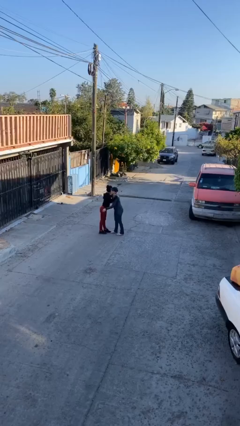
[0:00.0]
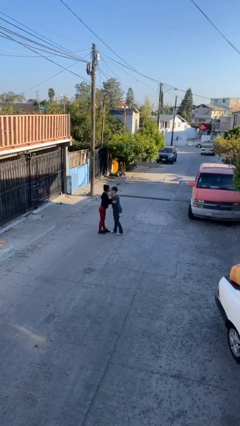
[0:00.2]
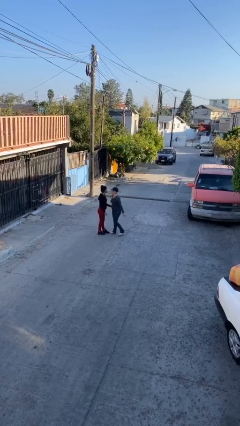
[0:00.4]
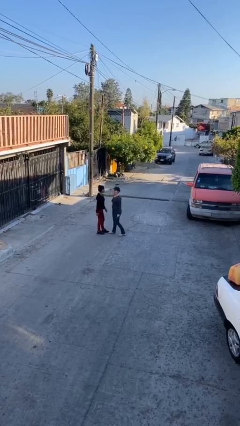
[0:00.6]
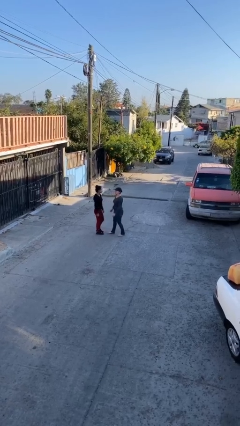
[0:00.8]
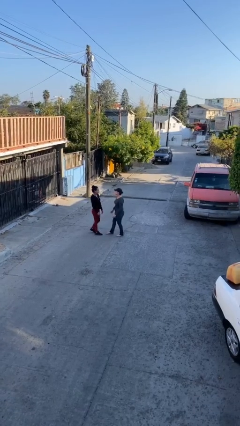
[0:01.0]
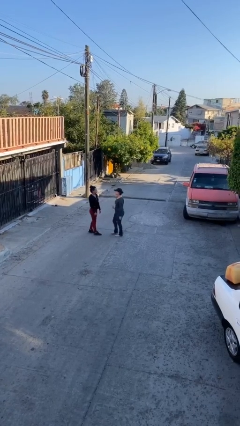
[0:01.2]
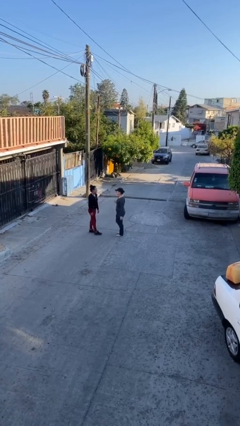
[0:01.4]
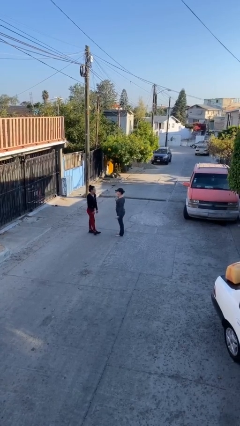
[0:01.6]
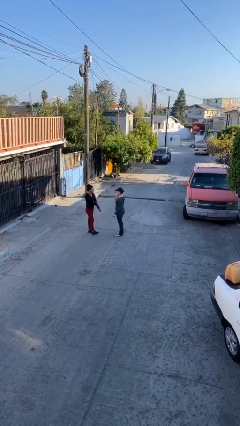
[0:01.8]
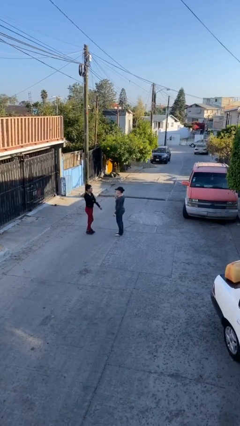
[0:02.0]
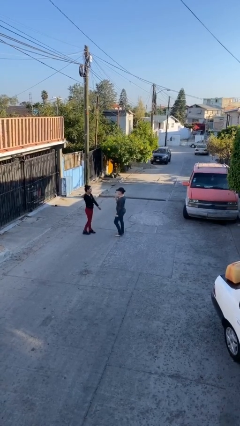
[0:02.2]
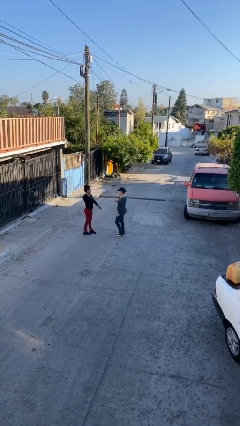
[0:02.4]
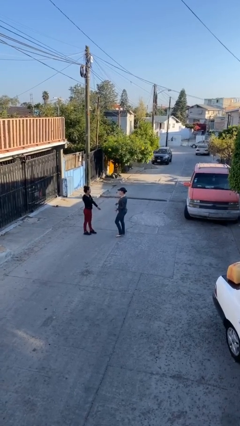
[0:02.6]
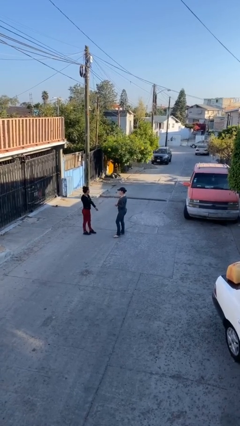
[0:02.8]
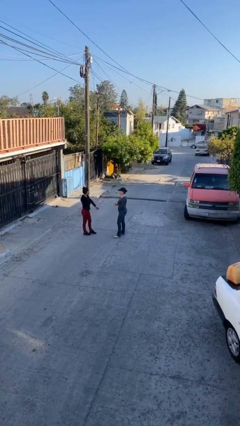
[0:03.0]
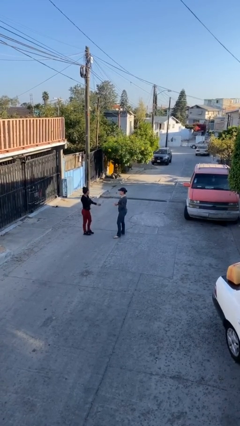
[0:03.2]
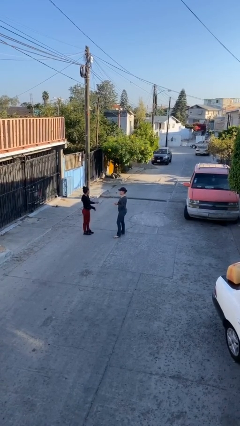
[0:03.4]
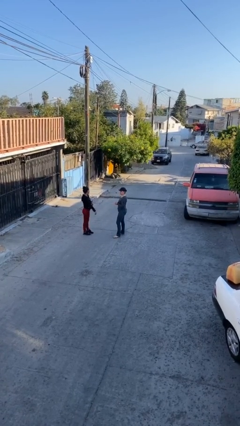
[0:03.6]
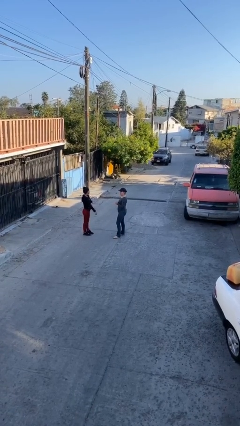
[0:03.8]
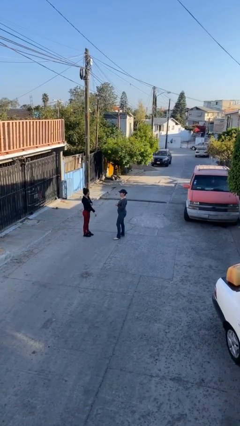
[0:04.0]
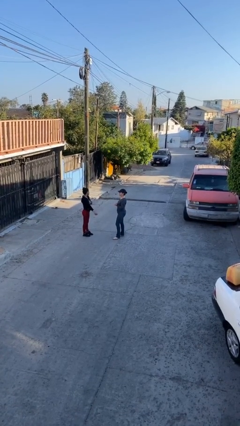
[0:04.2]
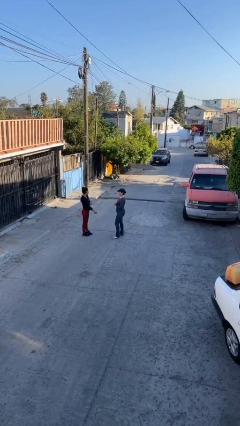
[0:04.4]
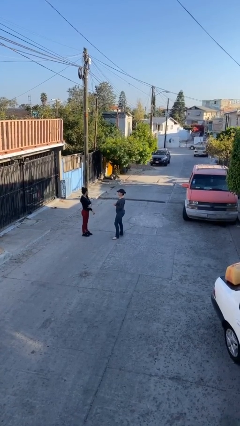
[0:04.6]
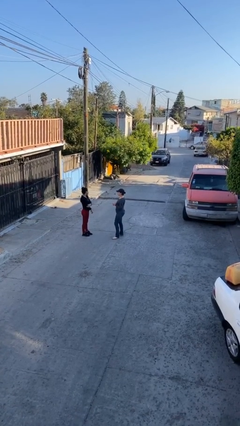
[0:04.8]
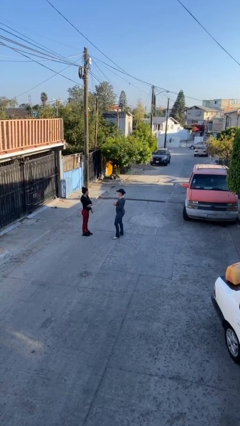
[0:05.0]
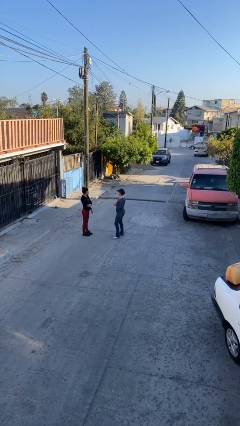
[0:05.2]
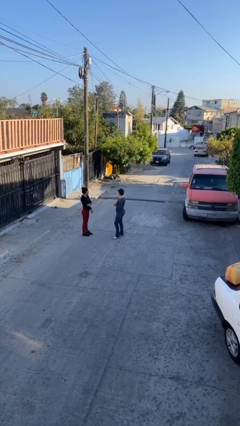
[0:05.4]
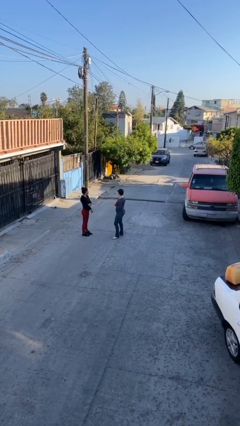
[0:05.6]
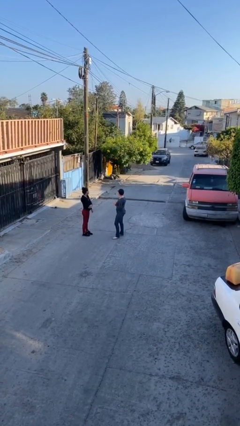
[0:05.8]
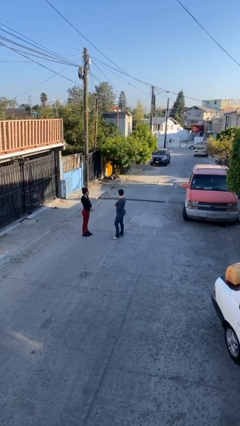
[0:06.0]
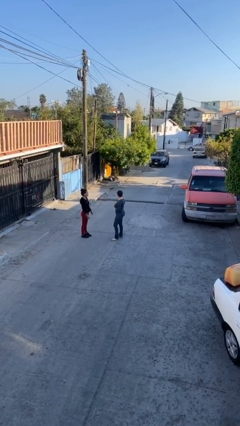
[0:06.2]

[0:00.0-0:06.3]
person talks to person

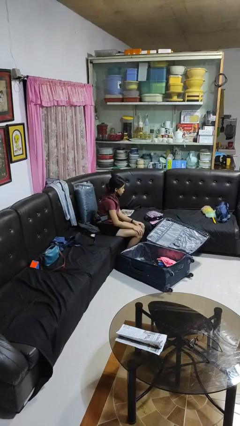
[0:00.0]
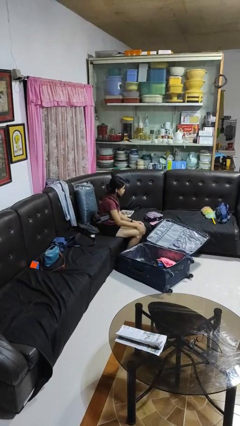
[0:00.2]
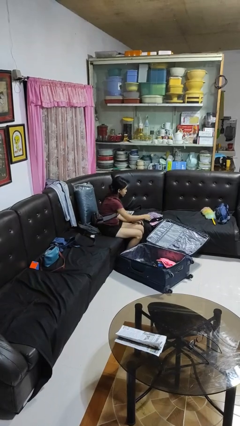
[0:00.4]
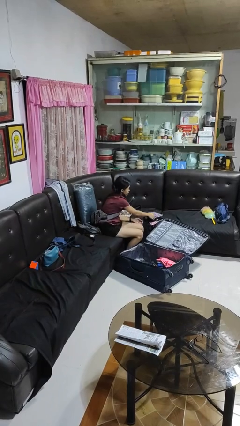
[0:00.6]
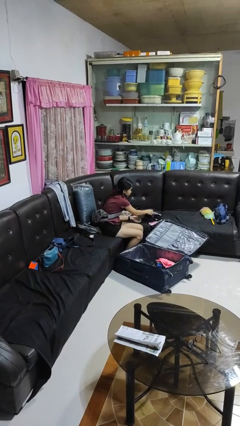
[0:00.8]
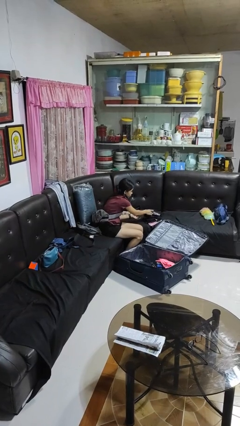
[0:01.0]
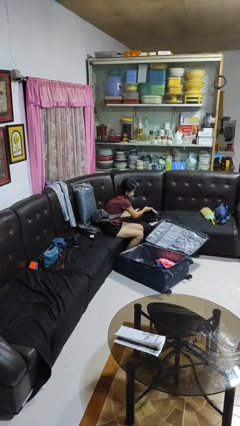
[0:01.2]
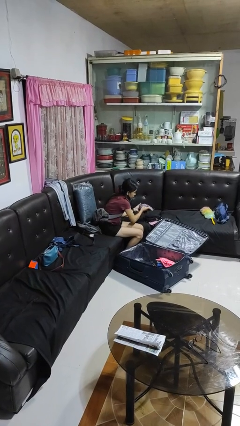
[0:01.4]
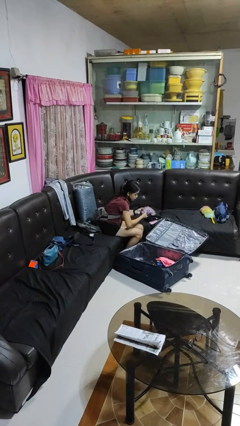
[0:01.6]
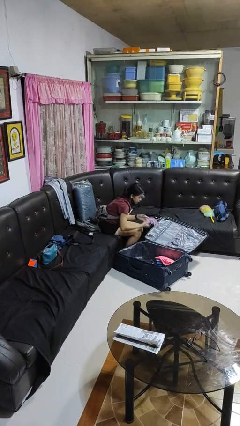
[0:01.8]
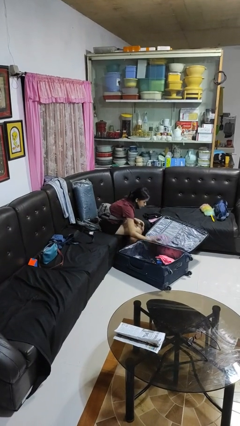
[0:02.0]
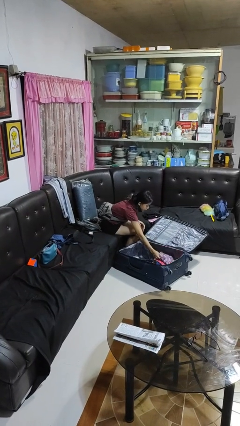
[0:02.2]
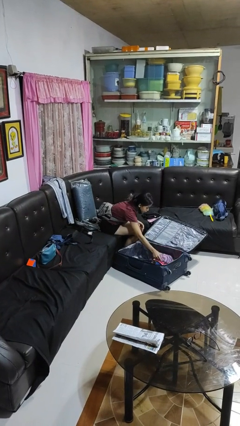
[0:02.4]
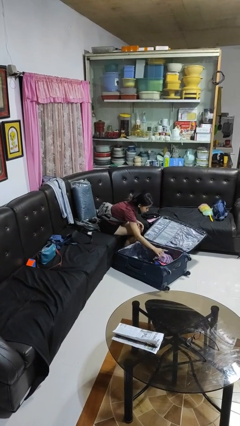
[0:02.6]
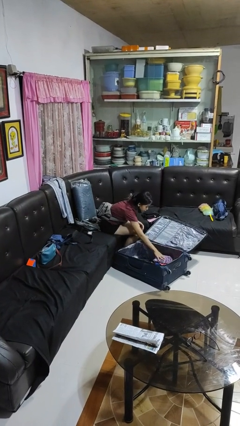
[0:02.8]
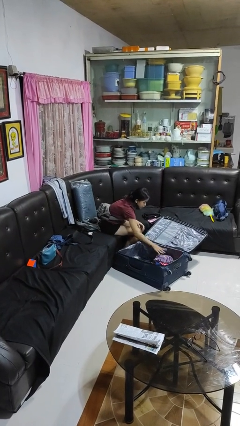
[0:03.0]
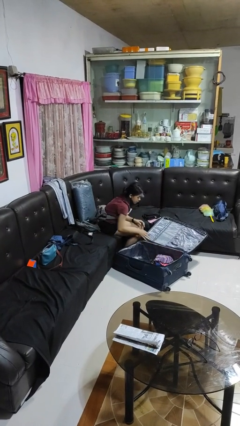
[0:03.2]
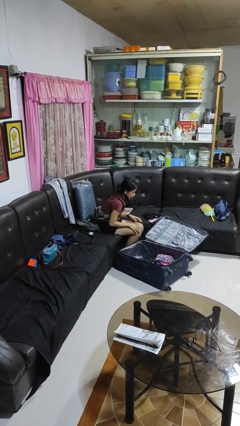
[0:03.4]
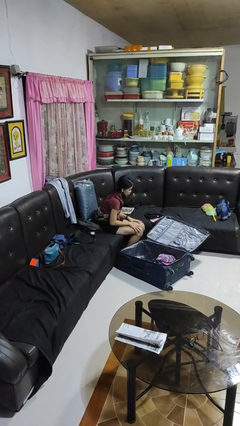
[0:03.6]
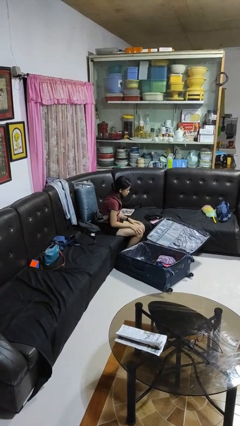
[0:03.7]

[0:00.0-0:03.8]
person loads clothes into suitcase

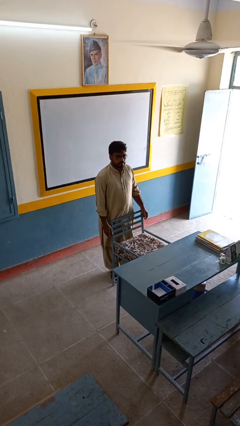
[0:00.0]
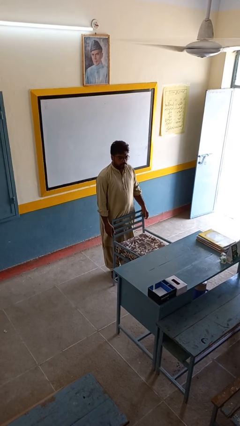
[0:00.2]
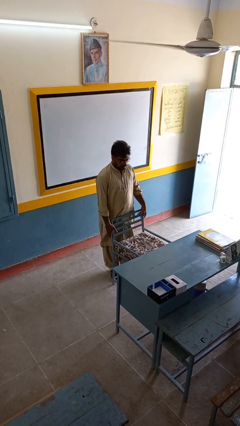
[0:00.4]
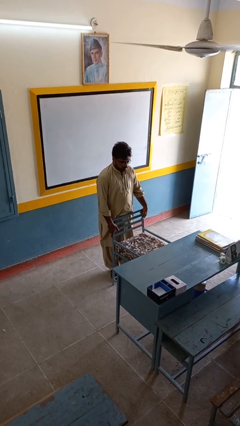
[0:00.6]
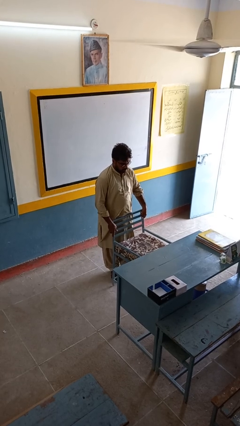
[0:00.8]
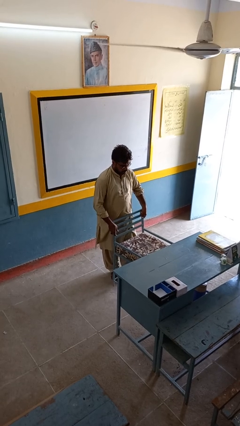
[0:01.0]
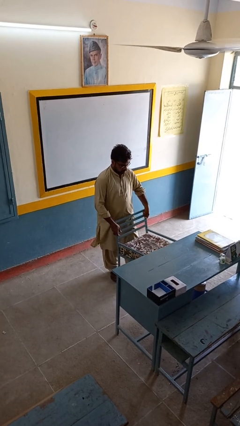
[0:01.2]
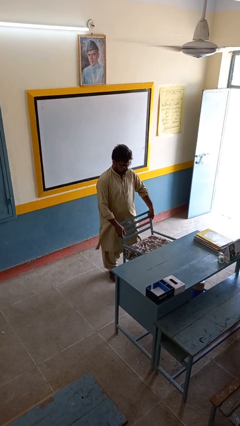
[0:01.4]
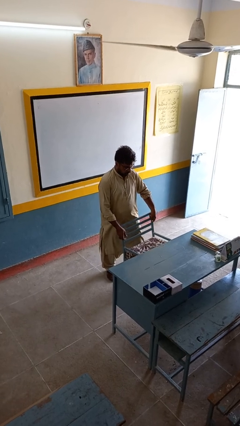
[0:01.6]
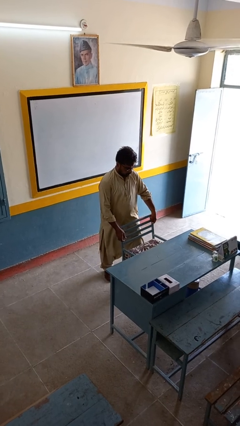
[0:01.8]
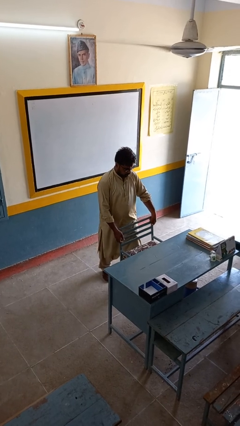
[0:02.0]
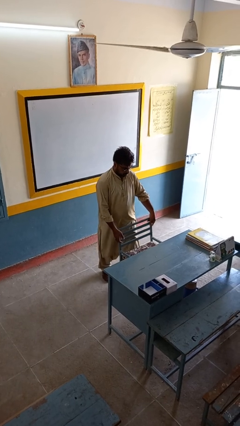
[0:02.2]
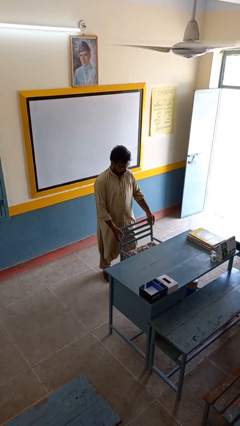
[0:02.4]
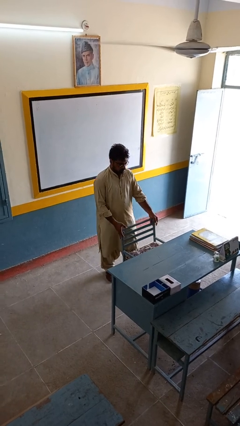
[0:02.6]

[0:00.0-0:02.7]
person pushes in chair

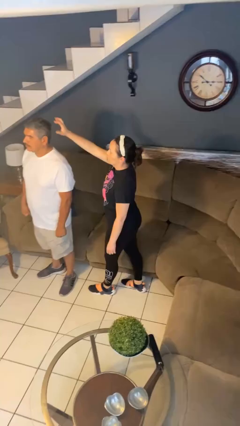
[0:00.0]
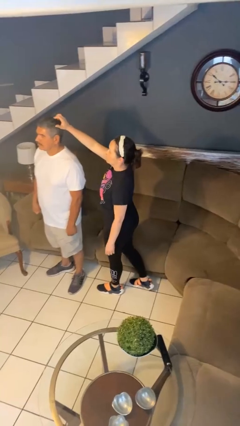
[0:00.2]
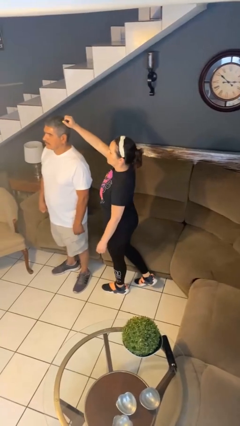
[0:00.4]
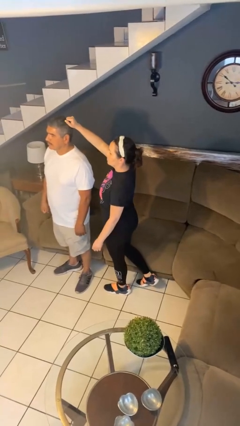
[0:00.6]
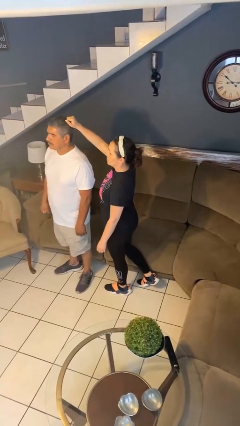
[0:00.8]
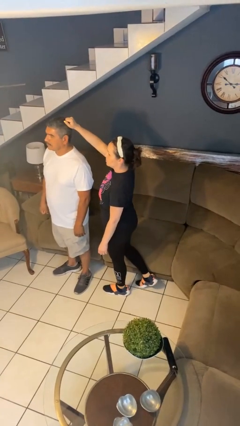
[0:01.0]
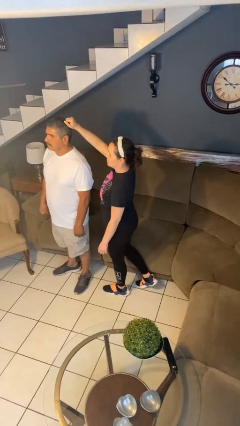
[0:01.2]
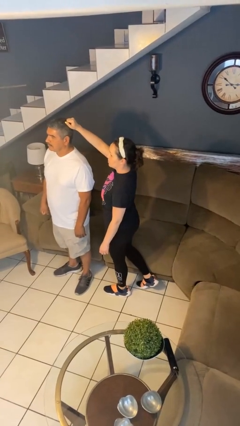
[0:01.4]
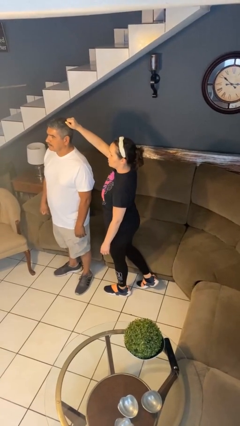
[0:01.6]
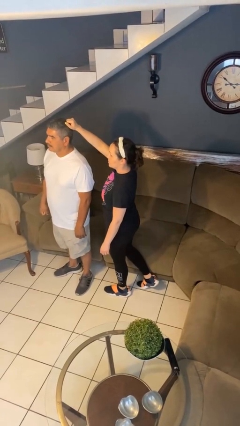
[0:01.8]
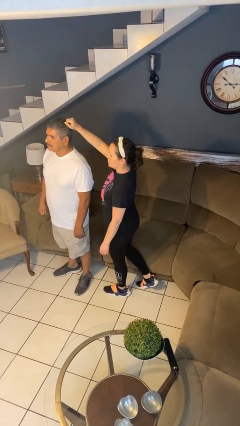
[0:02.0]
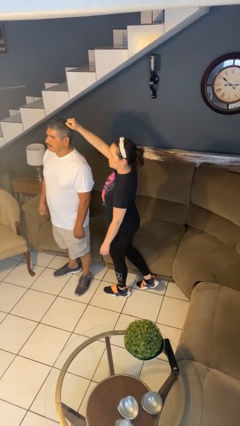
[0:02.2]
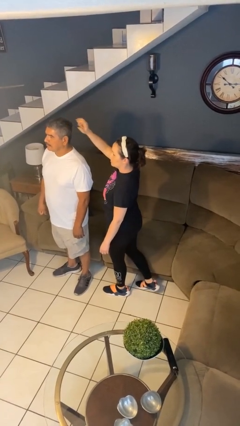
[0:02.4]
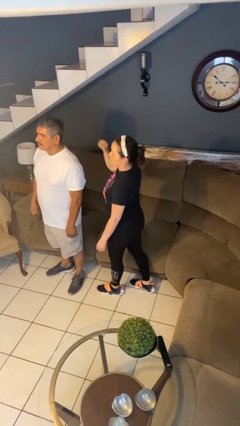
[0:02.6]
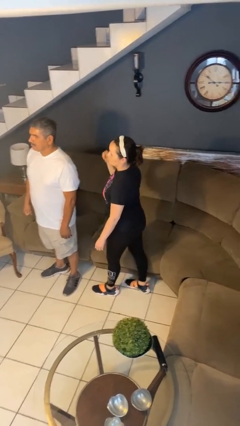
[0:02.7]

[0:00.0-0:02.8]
person grabs person by hair

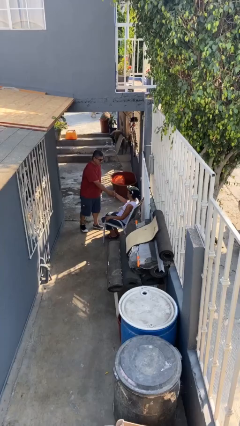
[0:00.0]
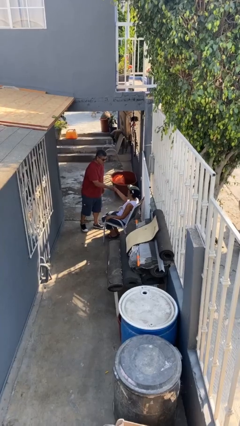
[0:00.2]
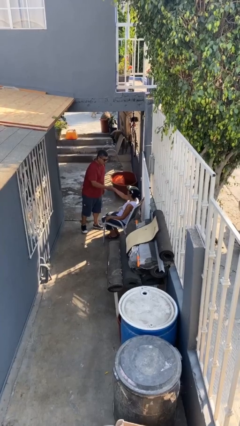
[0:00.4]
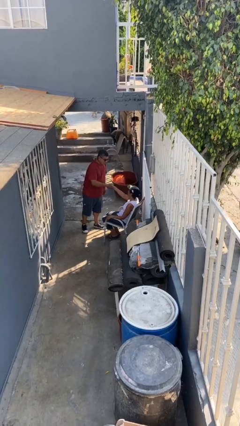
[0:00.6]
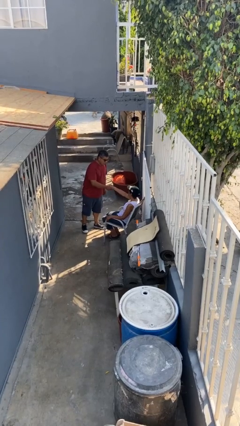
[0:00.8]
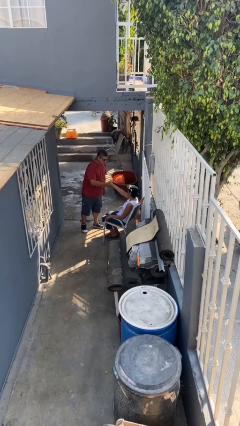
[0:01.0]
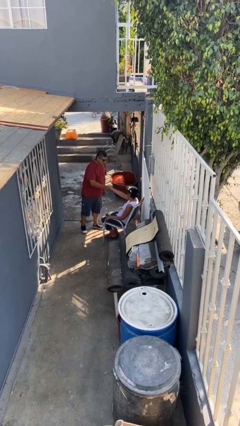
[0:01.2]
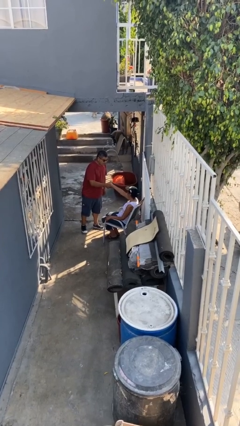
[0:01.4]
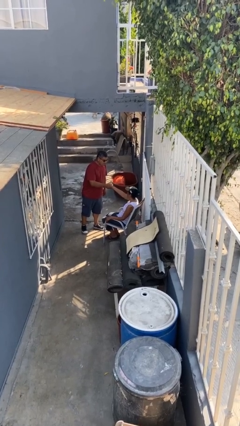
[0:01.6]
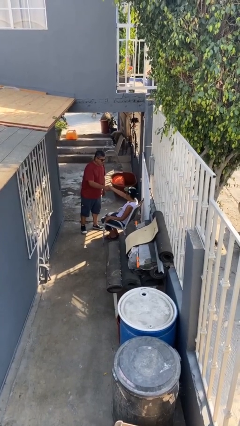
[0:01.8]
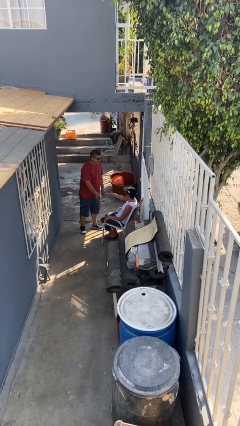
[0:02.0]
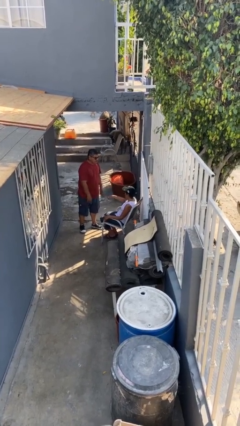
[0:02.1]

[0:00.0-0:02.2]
person shakes hand

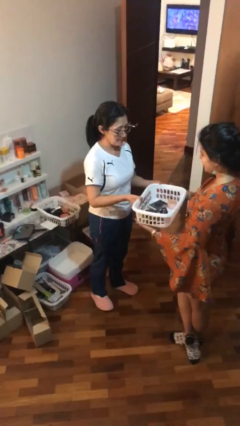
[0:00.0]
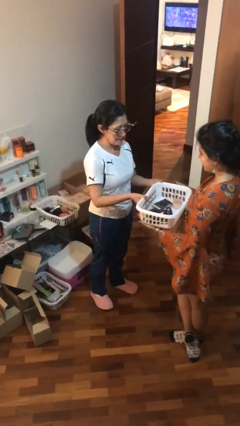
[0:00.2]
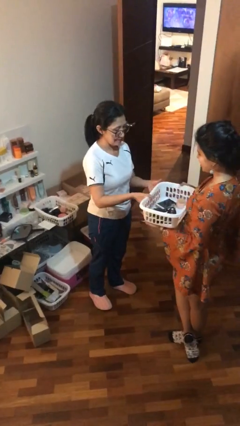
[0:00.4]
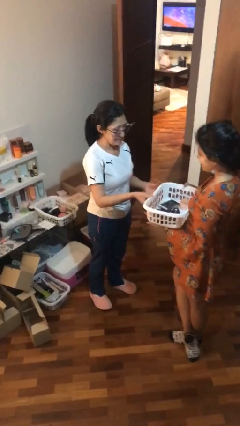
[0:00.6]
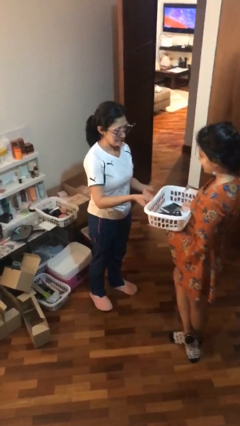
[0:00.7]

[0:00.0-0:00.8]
person transfers object to person
